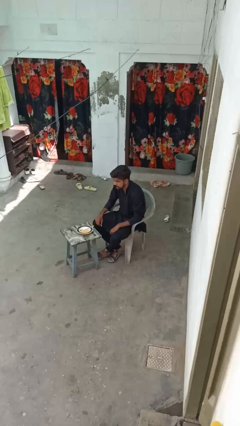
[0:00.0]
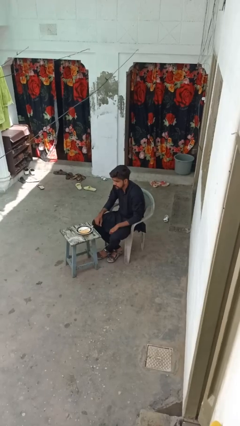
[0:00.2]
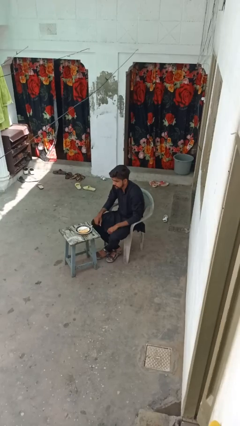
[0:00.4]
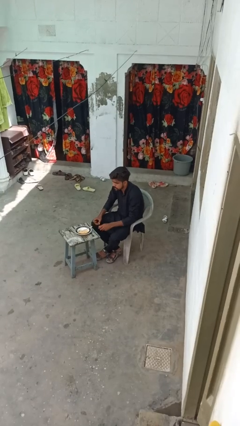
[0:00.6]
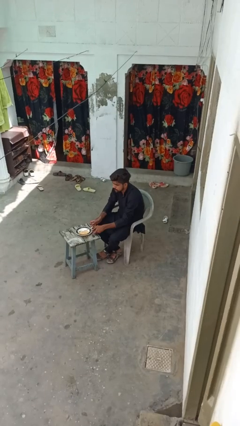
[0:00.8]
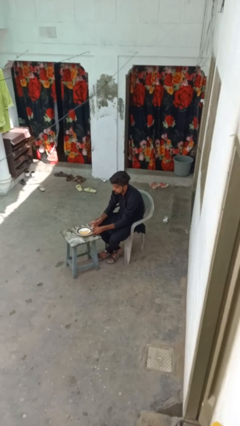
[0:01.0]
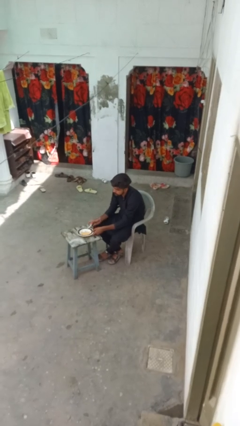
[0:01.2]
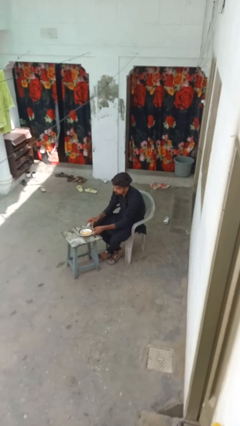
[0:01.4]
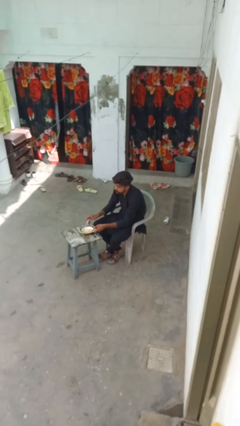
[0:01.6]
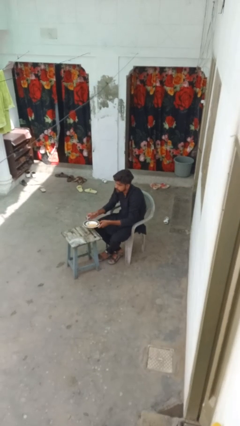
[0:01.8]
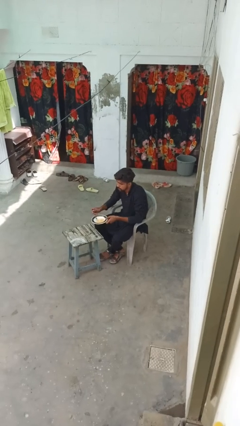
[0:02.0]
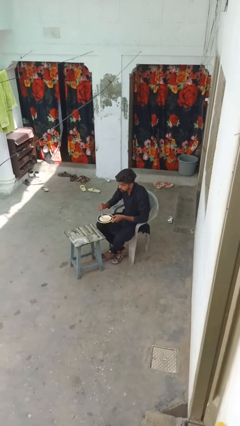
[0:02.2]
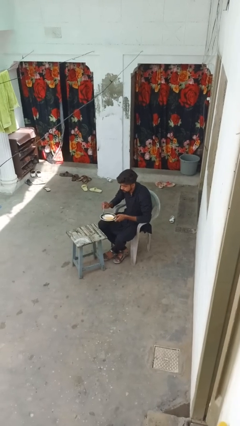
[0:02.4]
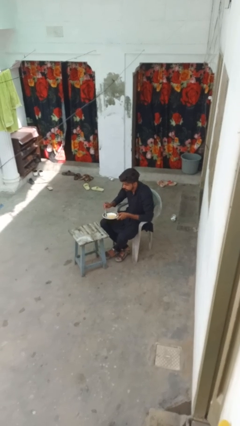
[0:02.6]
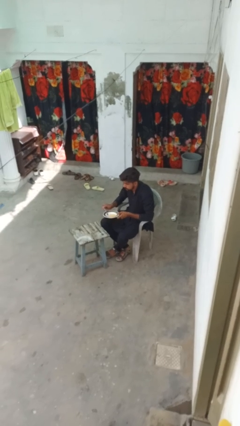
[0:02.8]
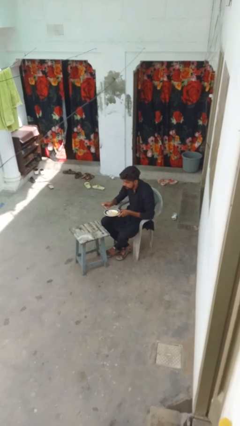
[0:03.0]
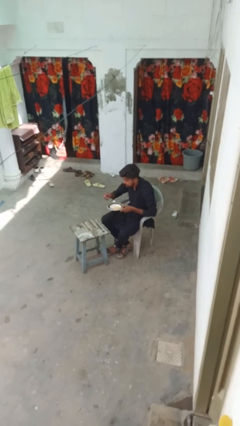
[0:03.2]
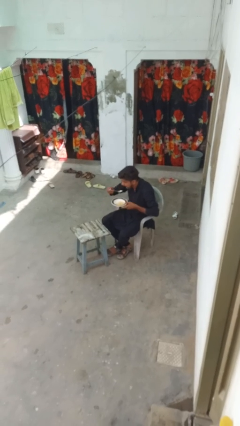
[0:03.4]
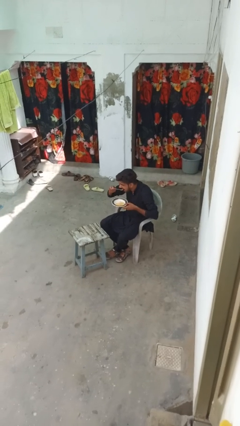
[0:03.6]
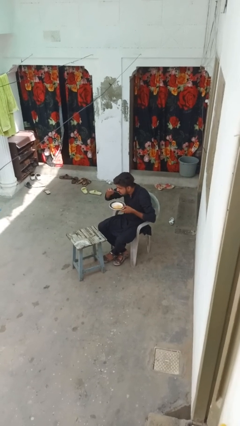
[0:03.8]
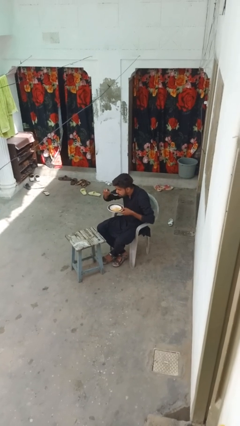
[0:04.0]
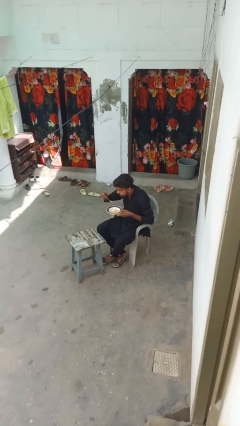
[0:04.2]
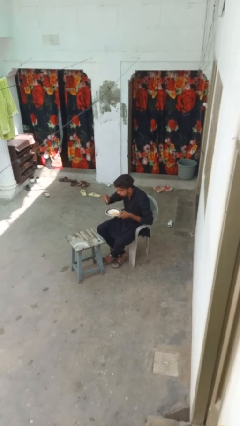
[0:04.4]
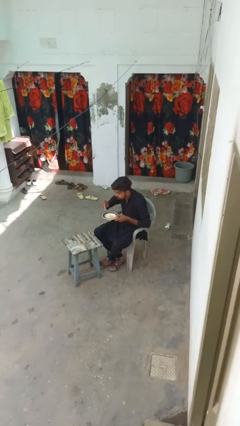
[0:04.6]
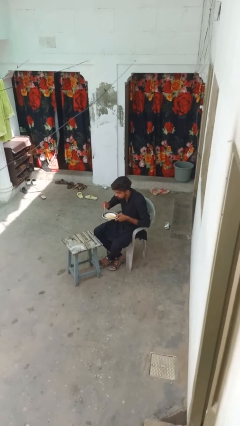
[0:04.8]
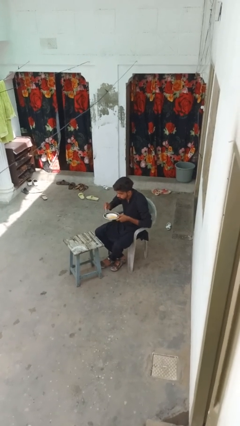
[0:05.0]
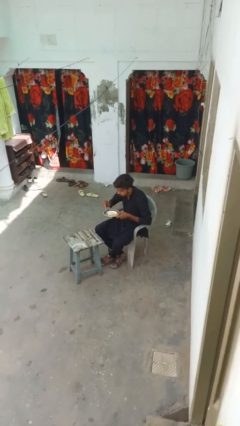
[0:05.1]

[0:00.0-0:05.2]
person eats with utensil

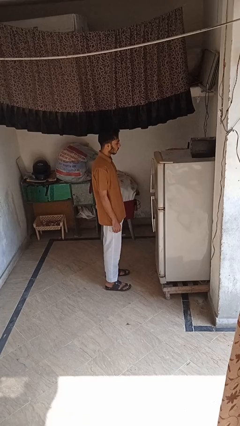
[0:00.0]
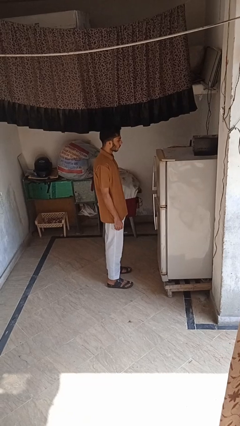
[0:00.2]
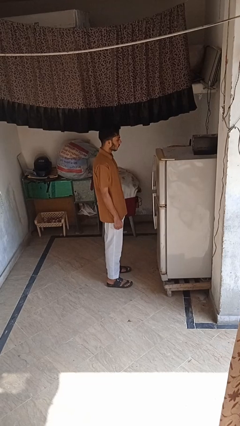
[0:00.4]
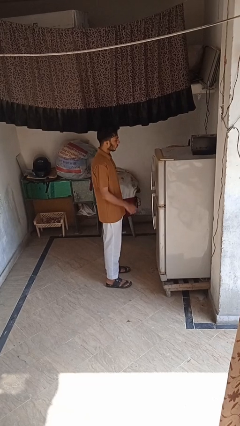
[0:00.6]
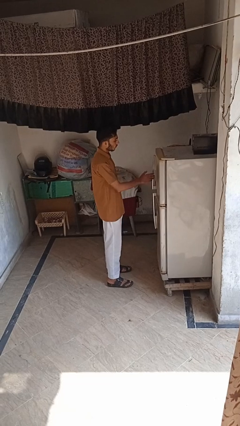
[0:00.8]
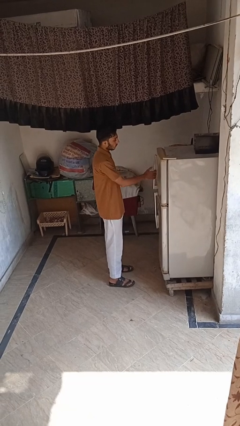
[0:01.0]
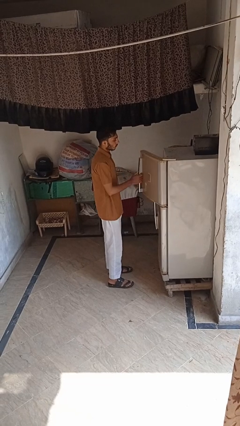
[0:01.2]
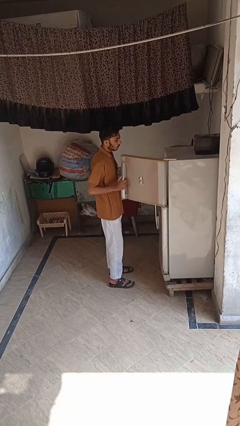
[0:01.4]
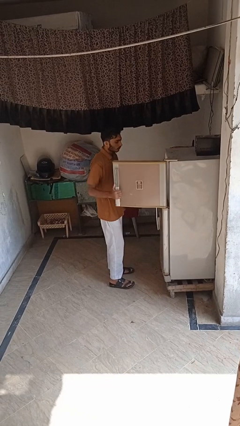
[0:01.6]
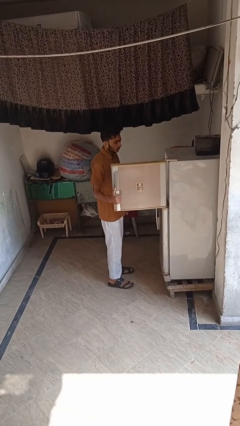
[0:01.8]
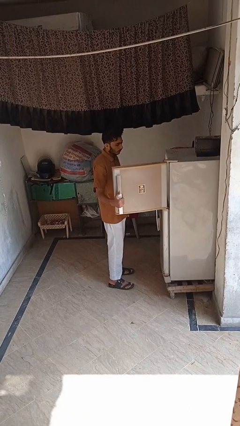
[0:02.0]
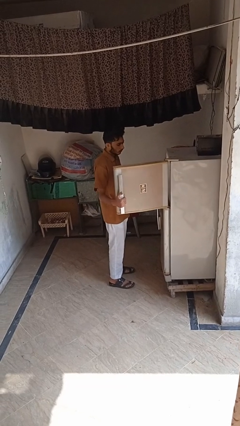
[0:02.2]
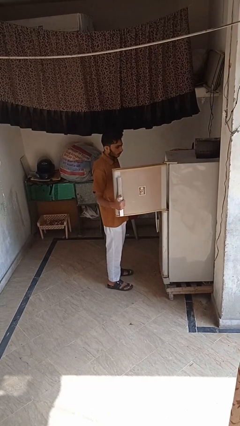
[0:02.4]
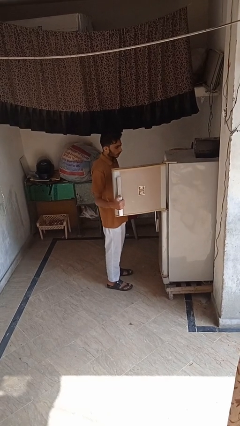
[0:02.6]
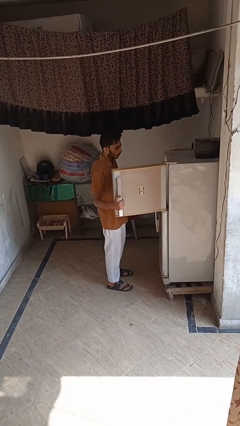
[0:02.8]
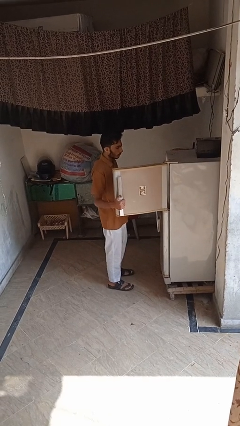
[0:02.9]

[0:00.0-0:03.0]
person opens refrigerator

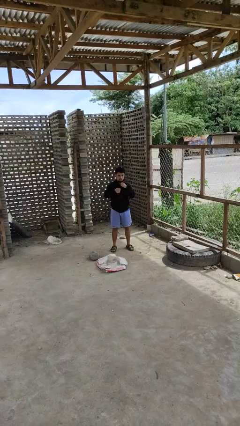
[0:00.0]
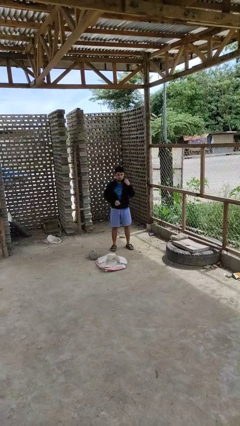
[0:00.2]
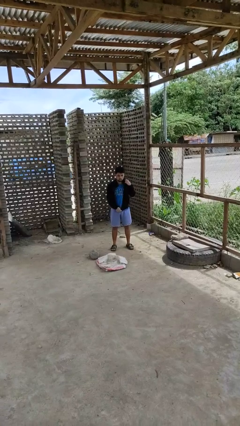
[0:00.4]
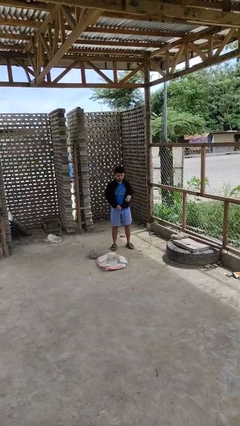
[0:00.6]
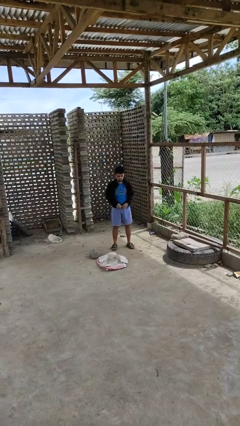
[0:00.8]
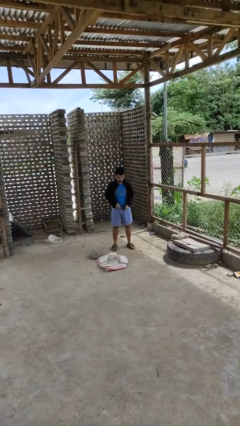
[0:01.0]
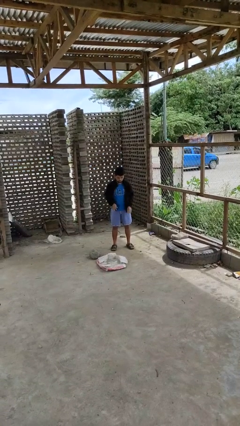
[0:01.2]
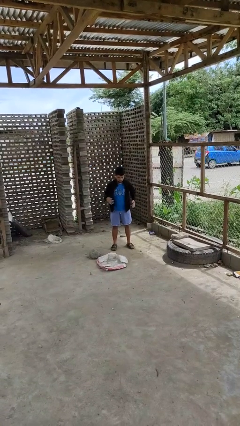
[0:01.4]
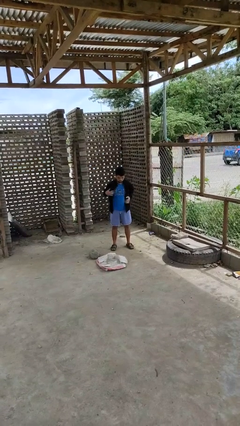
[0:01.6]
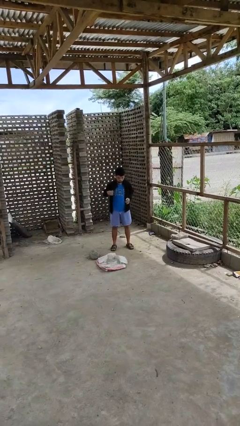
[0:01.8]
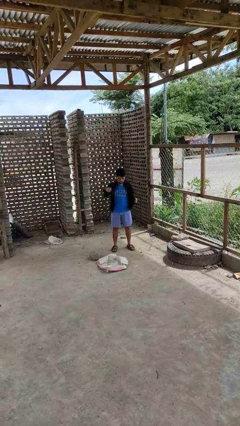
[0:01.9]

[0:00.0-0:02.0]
person unzips jacket

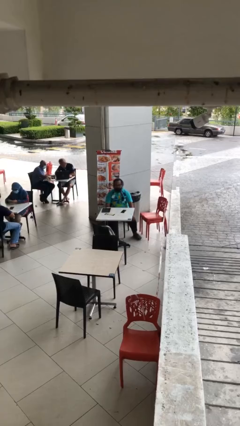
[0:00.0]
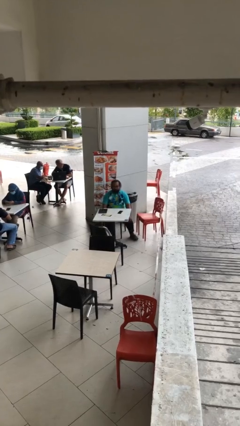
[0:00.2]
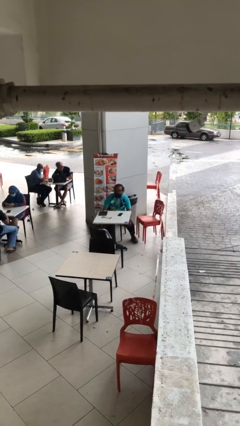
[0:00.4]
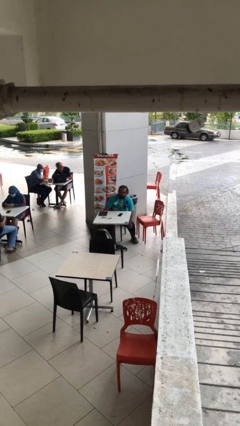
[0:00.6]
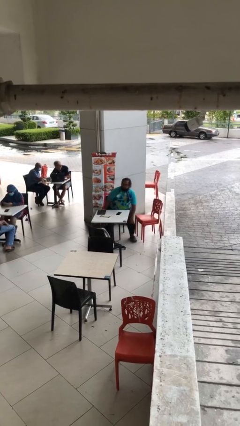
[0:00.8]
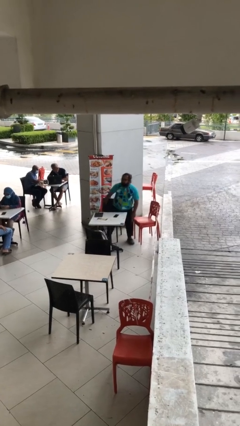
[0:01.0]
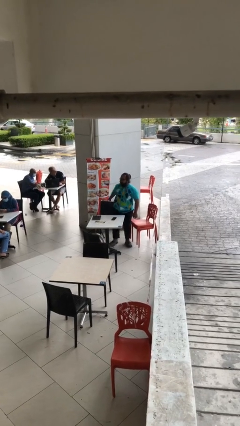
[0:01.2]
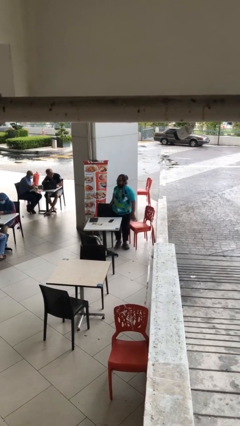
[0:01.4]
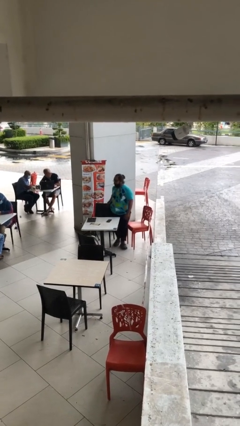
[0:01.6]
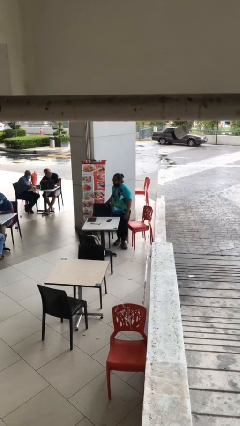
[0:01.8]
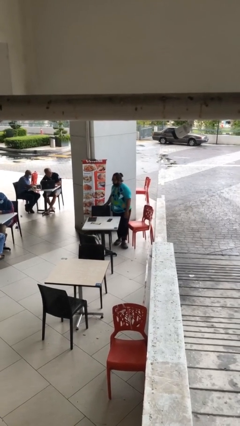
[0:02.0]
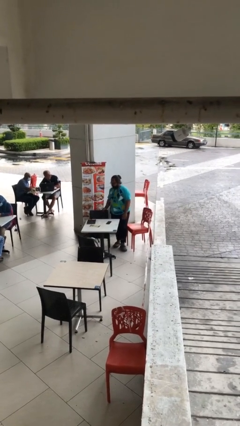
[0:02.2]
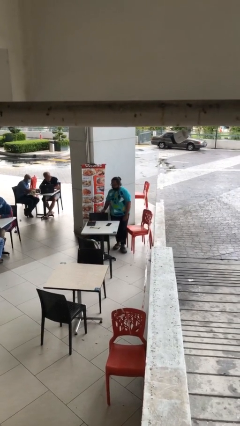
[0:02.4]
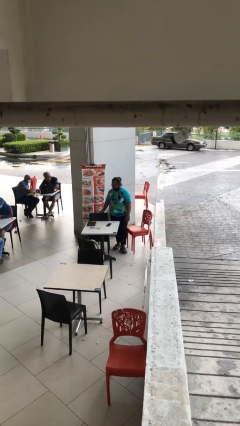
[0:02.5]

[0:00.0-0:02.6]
person stands up

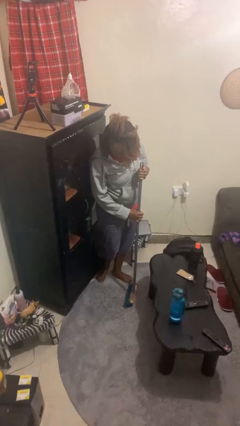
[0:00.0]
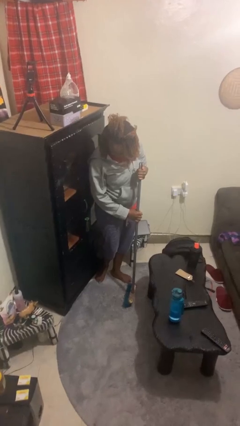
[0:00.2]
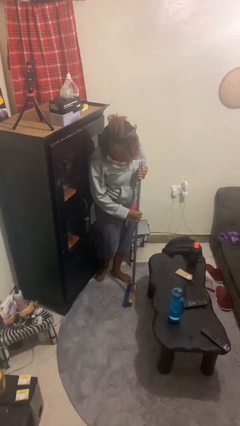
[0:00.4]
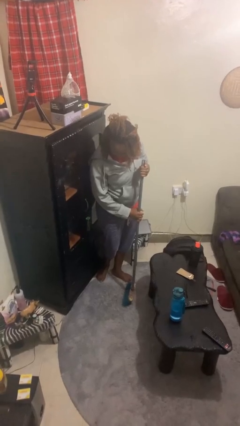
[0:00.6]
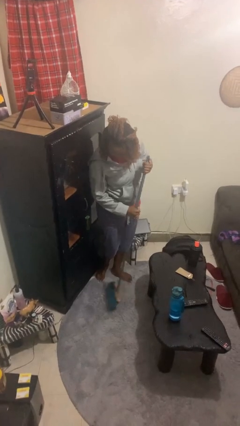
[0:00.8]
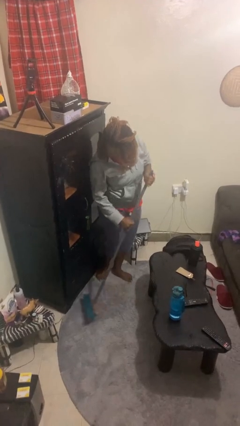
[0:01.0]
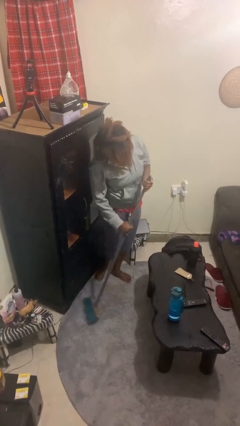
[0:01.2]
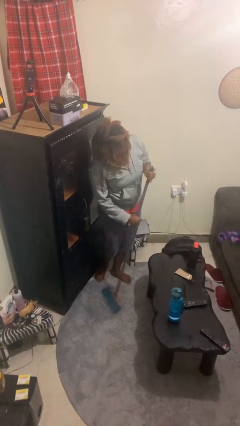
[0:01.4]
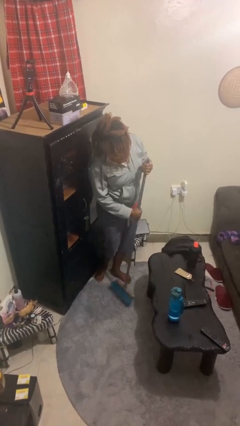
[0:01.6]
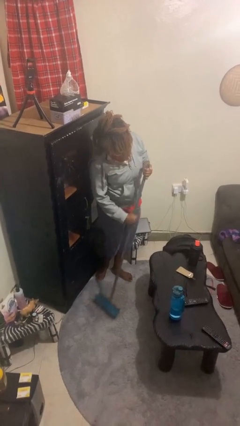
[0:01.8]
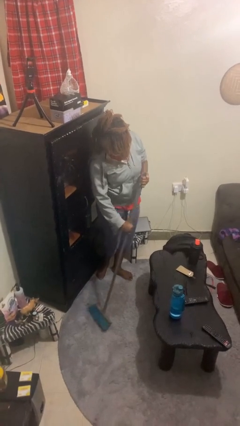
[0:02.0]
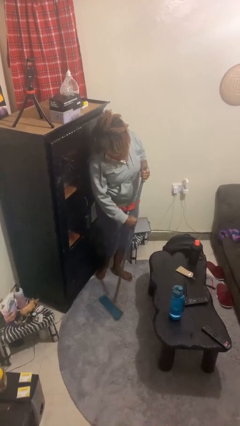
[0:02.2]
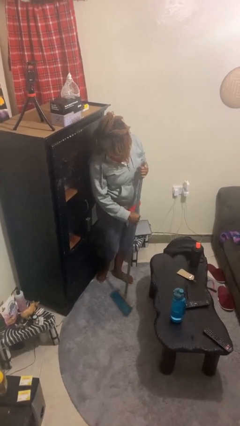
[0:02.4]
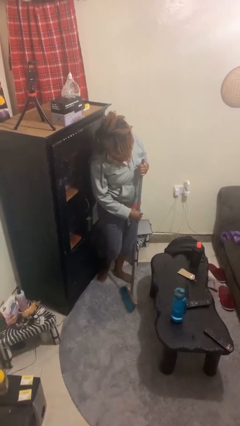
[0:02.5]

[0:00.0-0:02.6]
person sweeps floor

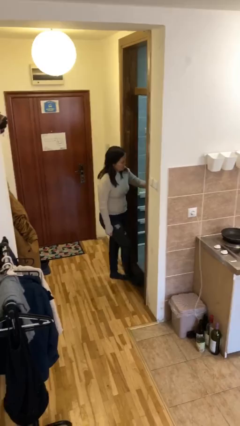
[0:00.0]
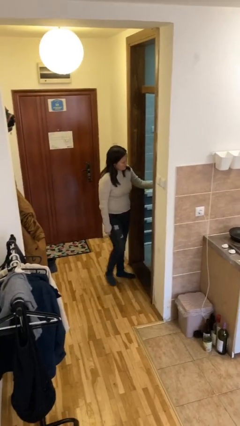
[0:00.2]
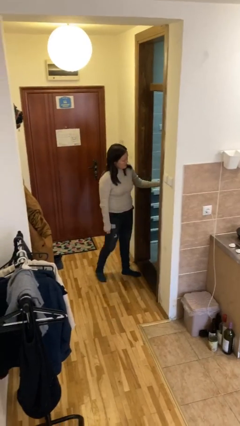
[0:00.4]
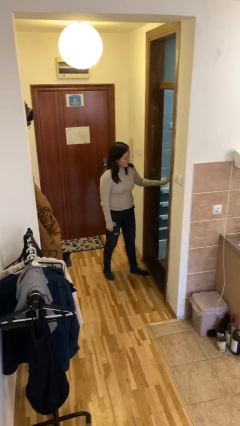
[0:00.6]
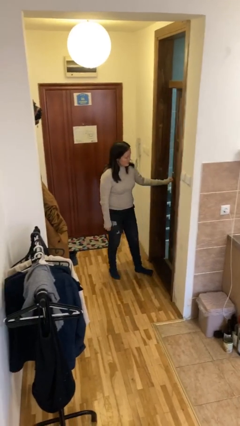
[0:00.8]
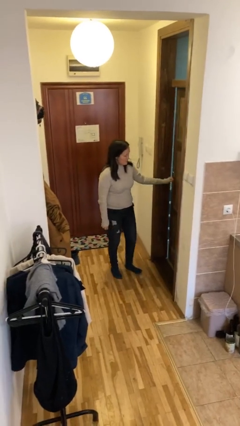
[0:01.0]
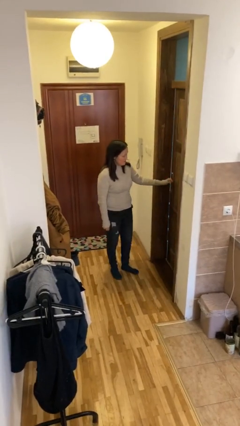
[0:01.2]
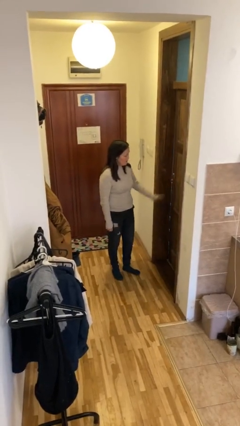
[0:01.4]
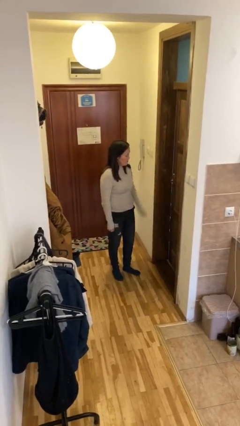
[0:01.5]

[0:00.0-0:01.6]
person closes facility door
